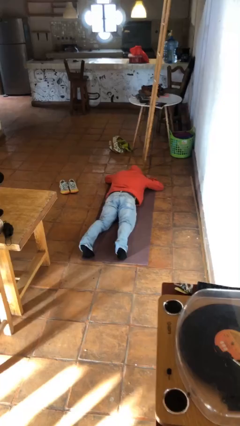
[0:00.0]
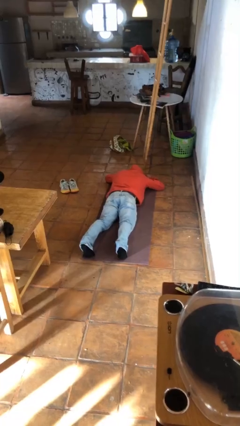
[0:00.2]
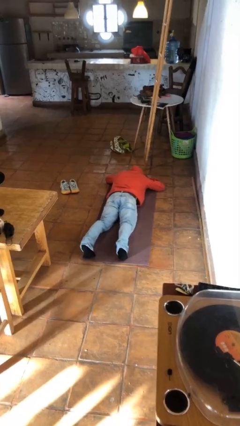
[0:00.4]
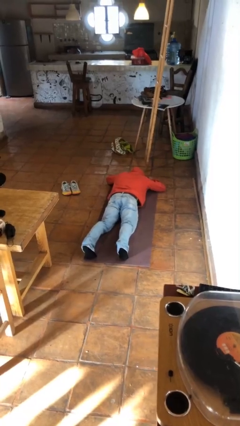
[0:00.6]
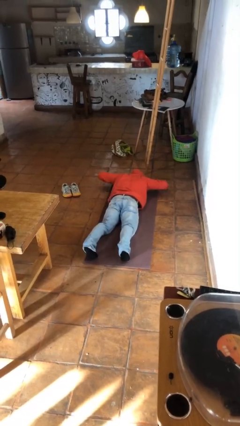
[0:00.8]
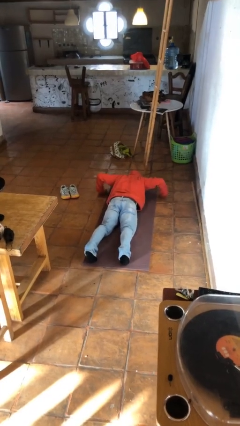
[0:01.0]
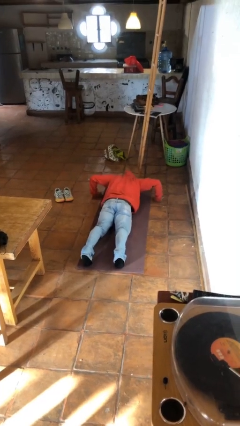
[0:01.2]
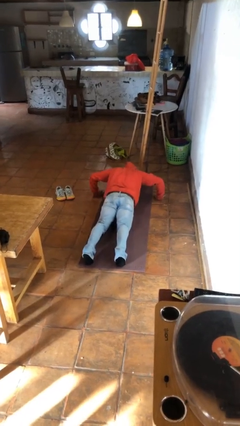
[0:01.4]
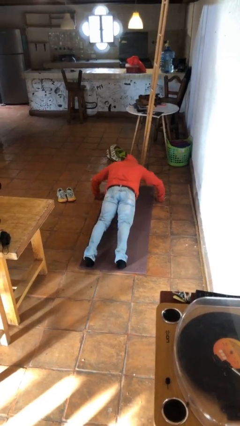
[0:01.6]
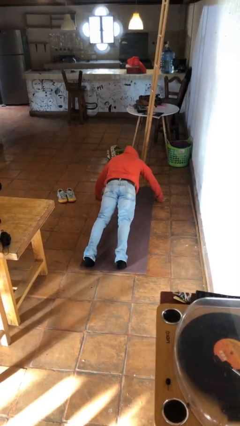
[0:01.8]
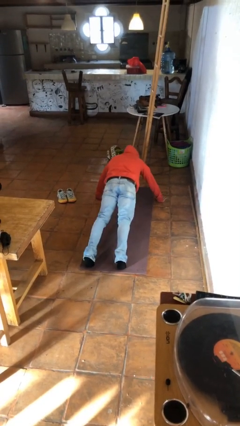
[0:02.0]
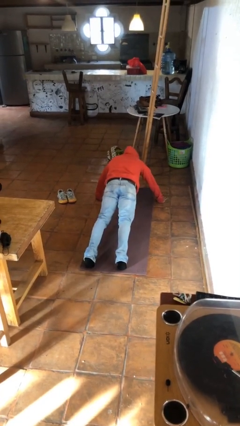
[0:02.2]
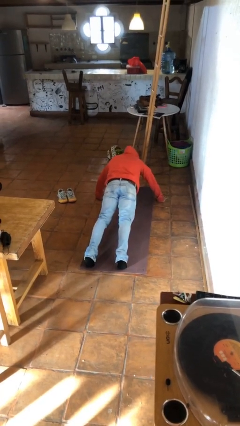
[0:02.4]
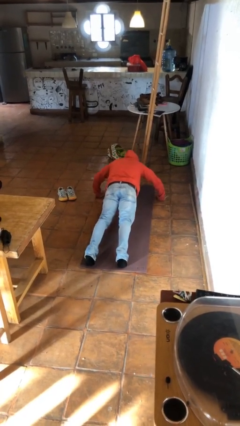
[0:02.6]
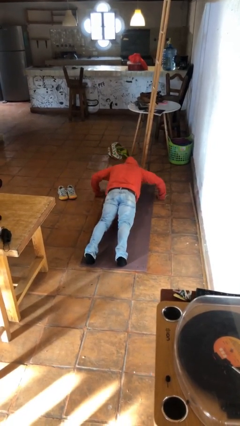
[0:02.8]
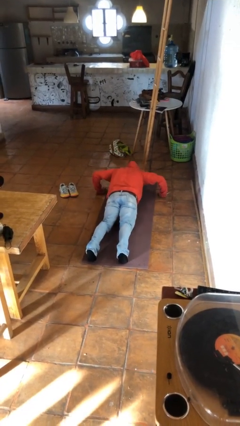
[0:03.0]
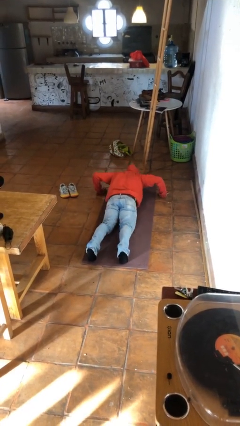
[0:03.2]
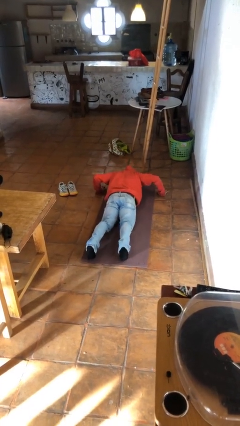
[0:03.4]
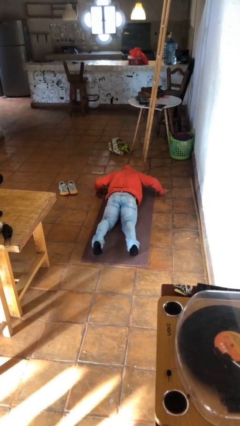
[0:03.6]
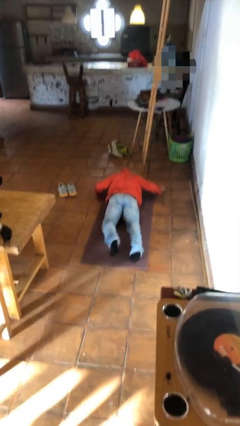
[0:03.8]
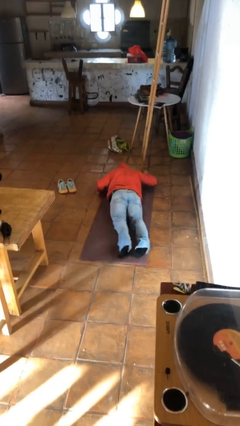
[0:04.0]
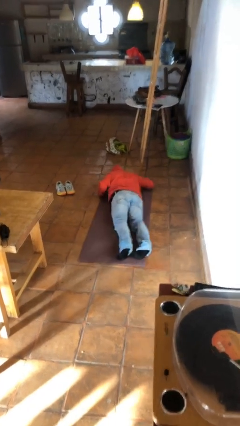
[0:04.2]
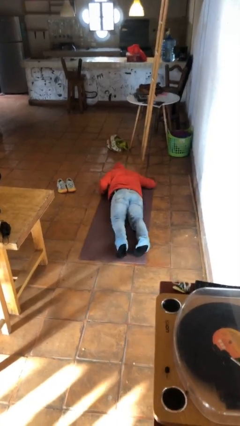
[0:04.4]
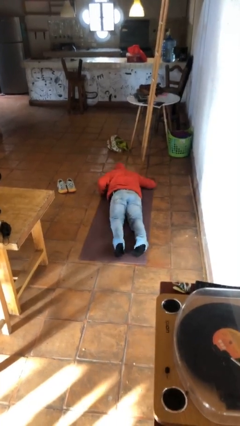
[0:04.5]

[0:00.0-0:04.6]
person exercises with pushup

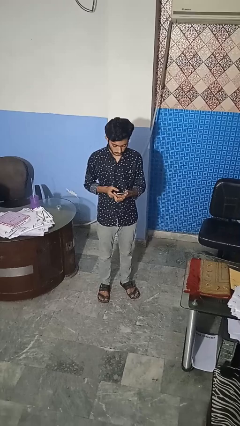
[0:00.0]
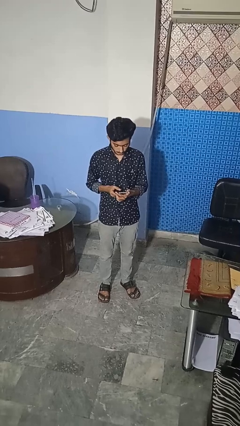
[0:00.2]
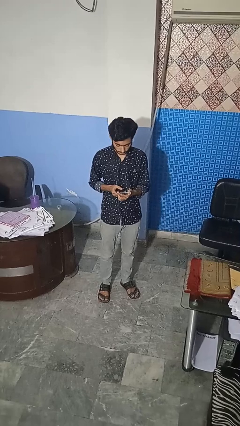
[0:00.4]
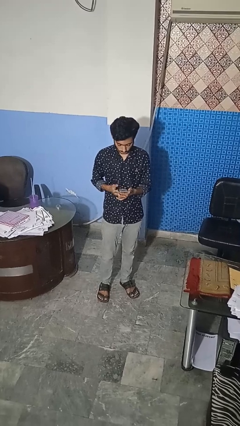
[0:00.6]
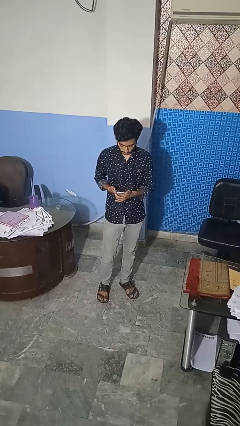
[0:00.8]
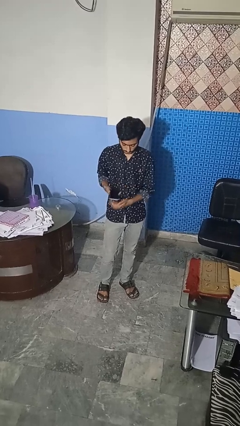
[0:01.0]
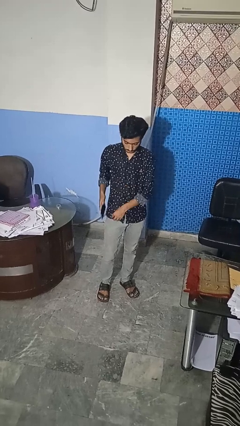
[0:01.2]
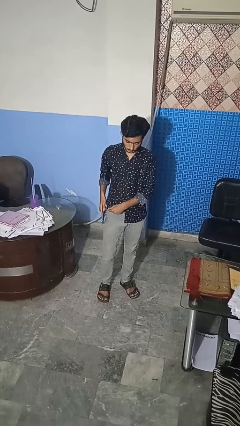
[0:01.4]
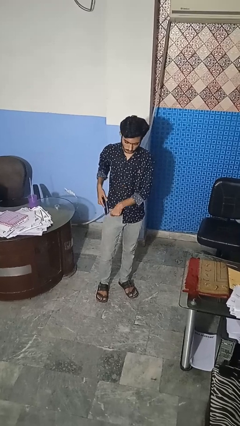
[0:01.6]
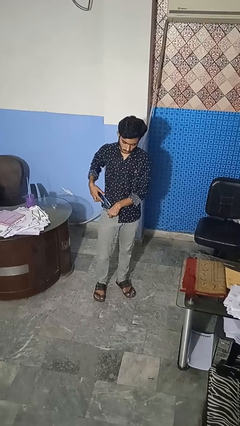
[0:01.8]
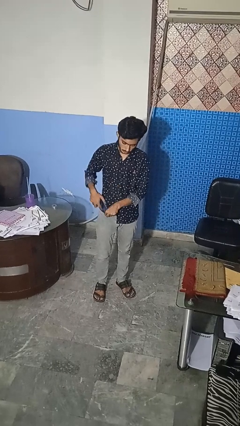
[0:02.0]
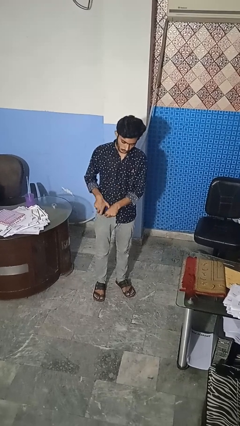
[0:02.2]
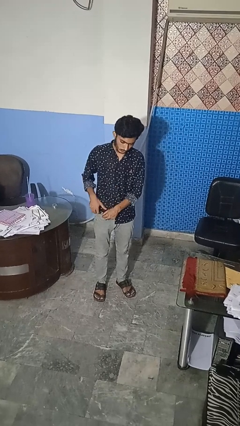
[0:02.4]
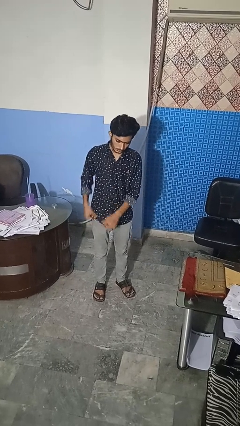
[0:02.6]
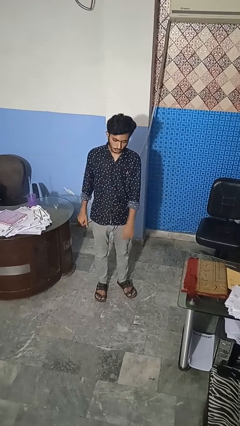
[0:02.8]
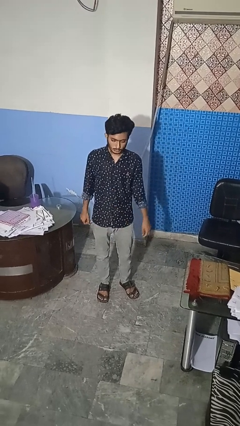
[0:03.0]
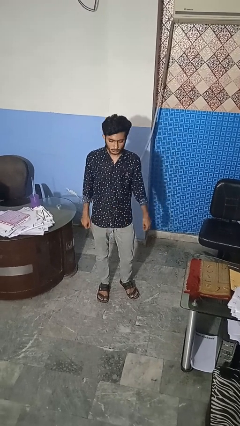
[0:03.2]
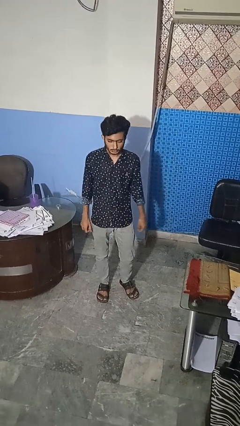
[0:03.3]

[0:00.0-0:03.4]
person puts phone into pocket

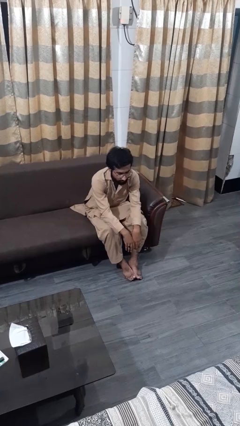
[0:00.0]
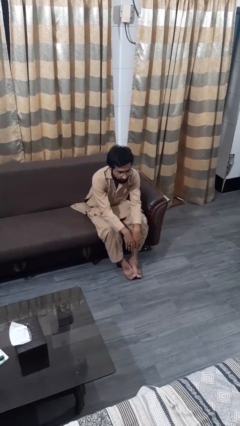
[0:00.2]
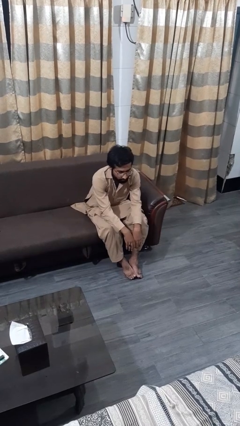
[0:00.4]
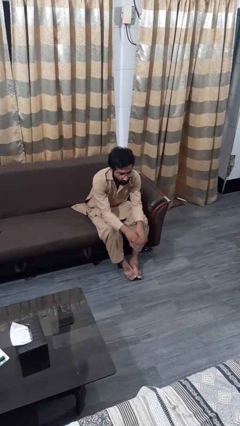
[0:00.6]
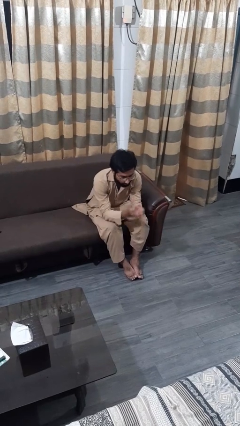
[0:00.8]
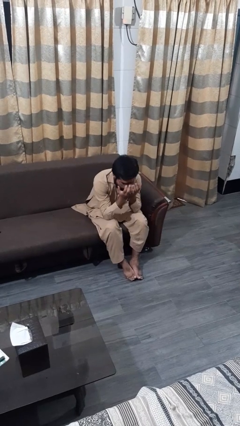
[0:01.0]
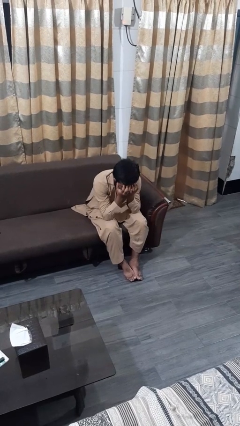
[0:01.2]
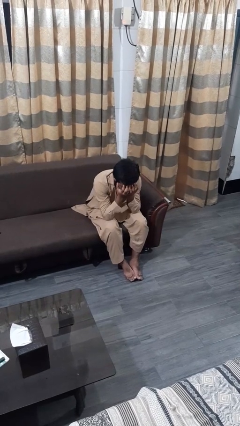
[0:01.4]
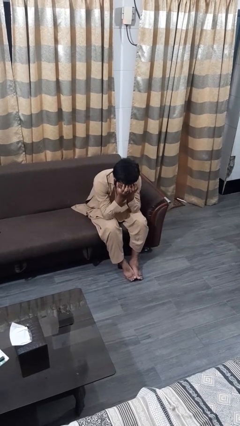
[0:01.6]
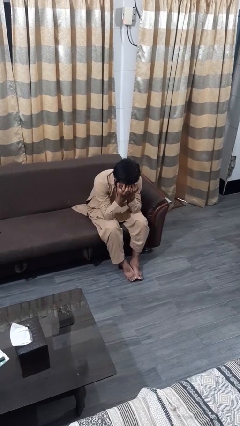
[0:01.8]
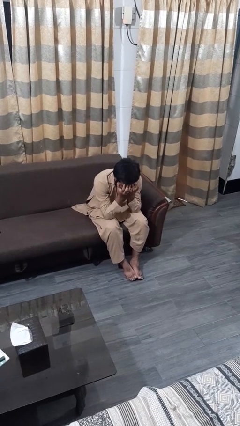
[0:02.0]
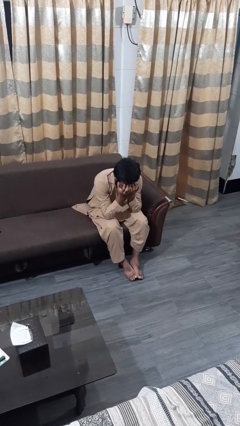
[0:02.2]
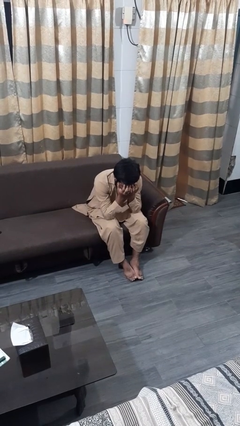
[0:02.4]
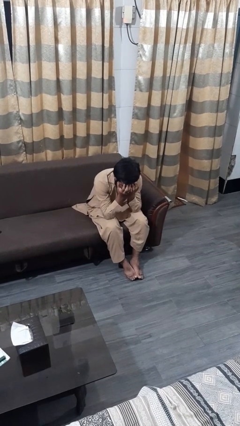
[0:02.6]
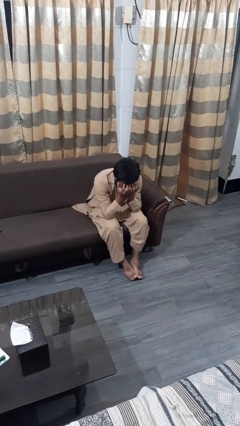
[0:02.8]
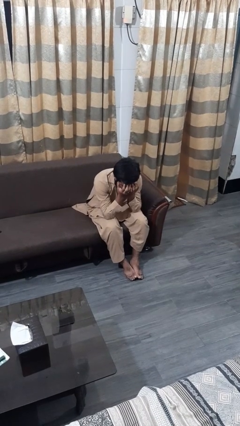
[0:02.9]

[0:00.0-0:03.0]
person covers face with hands

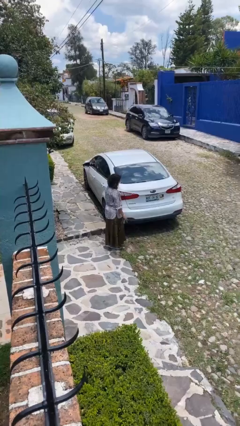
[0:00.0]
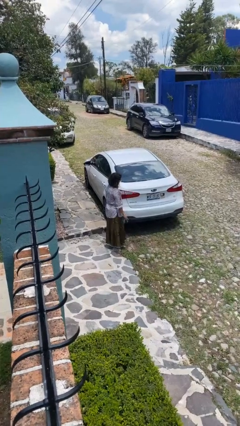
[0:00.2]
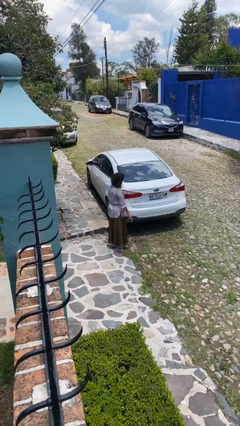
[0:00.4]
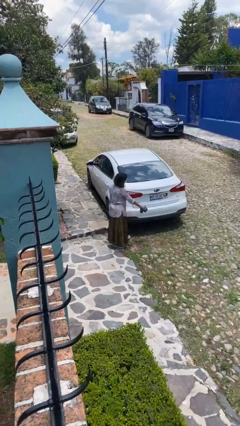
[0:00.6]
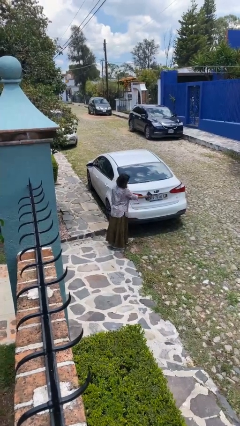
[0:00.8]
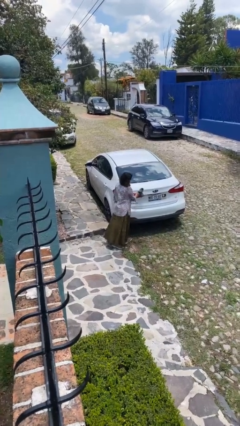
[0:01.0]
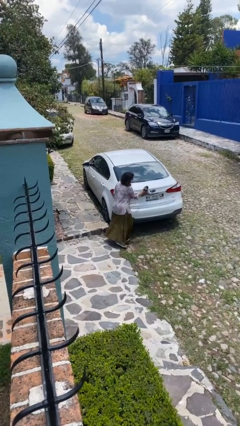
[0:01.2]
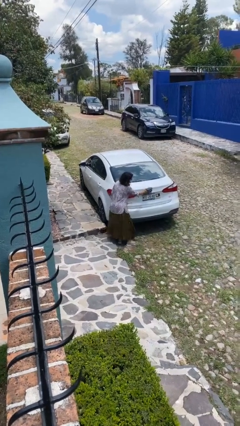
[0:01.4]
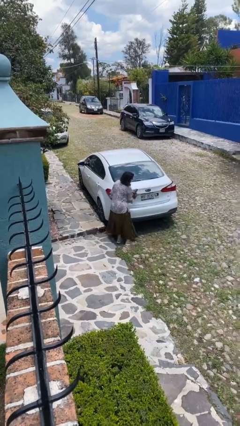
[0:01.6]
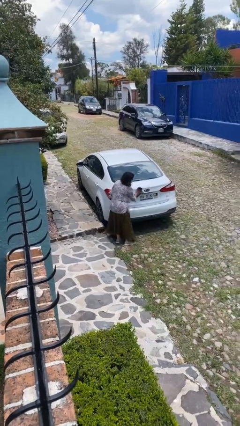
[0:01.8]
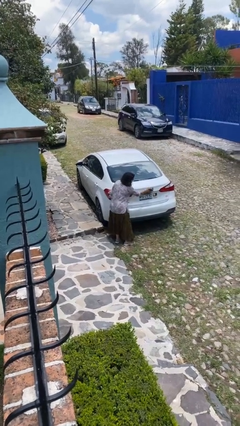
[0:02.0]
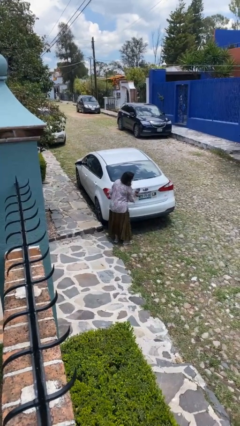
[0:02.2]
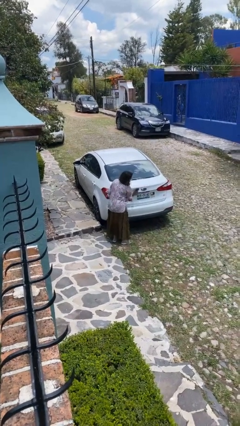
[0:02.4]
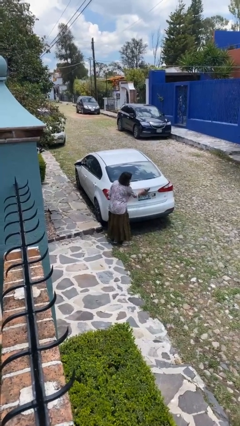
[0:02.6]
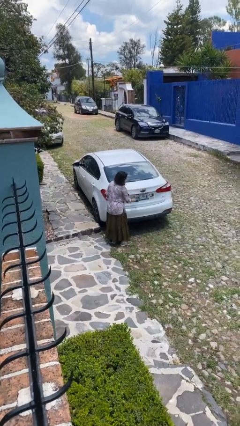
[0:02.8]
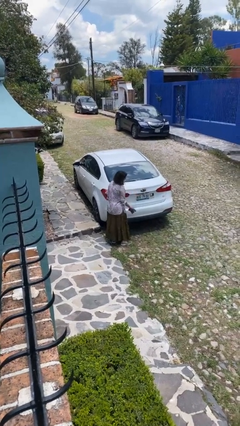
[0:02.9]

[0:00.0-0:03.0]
person polishes car with rag

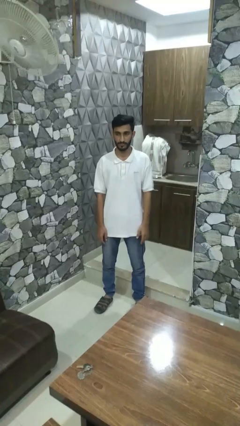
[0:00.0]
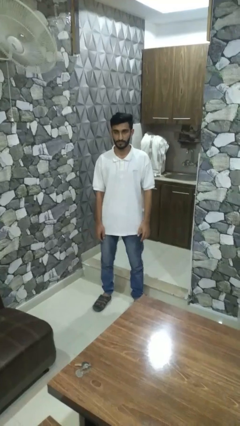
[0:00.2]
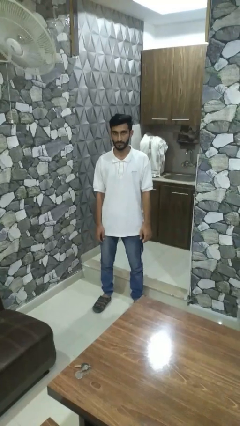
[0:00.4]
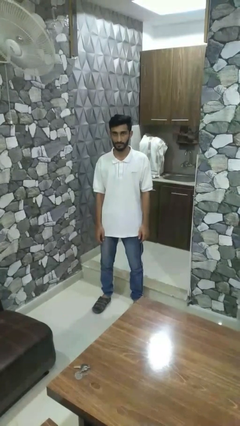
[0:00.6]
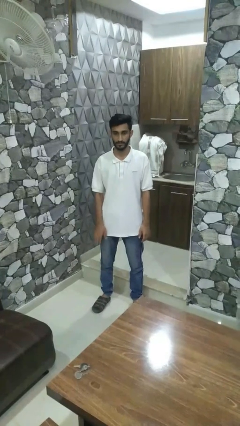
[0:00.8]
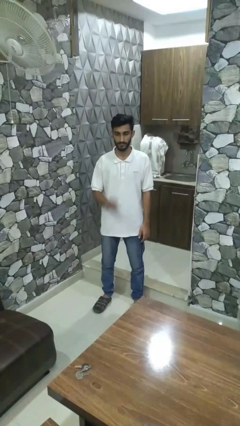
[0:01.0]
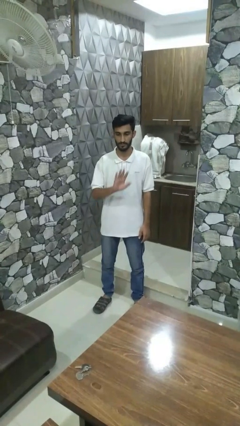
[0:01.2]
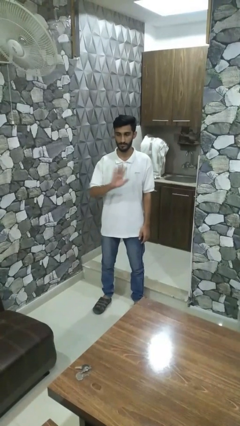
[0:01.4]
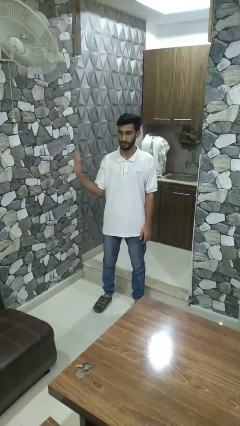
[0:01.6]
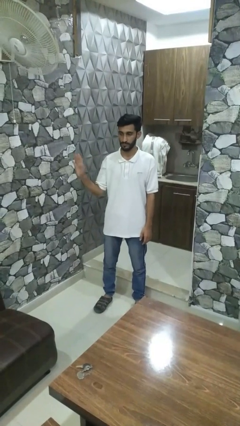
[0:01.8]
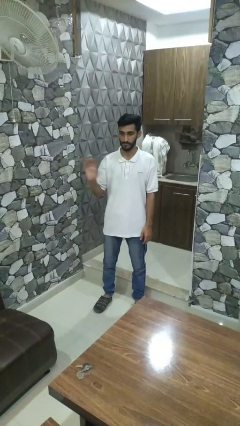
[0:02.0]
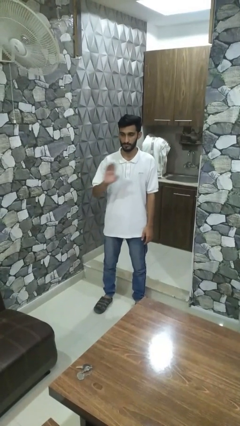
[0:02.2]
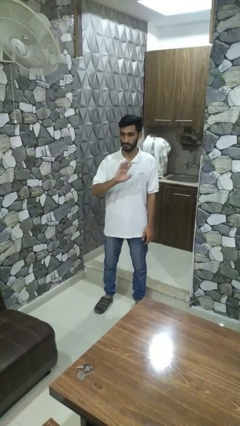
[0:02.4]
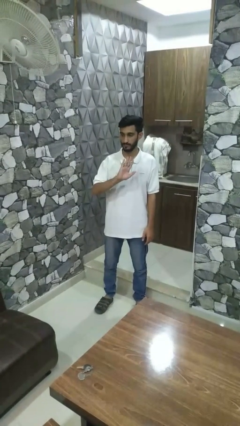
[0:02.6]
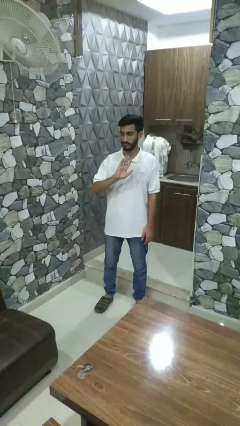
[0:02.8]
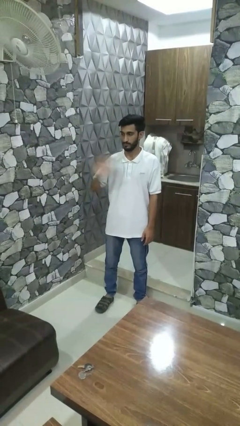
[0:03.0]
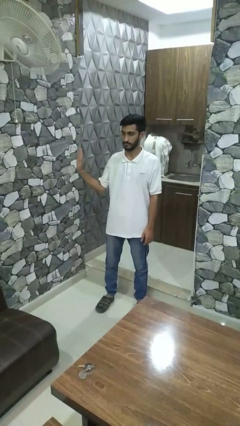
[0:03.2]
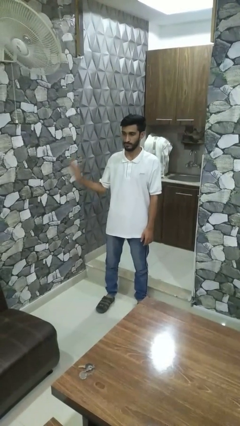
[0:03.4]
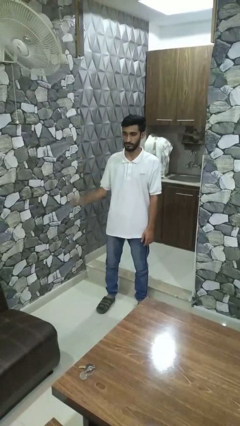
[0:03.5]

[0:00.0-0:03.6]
person gestures swipe right
